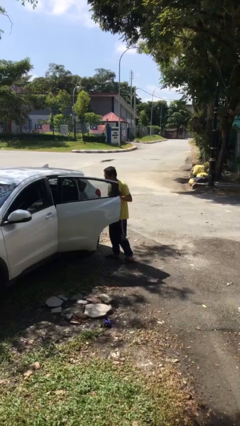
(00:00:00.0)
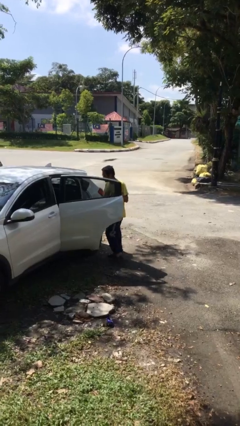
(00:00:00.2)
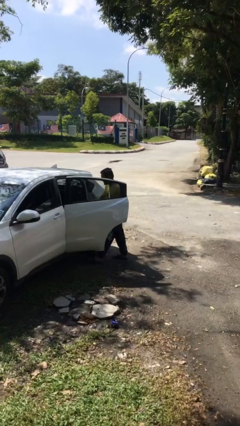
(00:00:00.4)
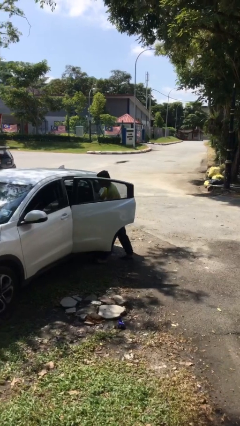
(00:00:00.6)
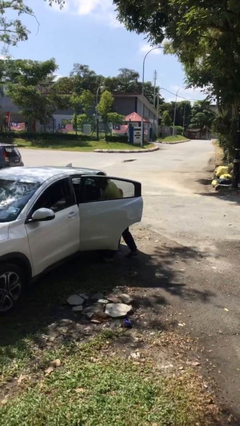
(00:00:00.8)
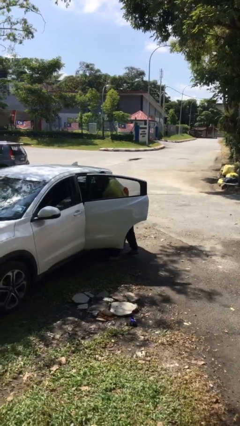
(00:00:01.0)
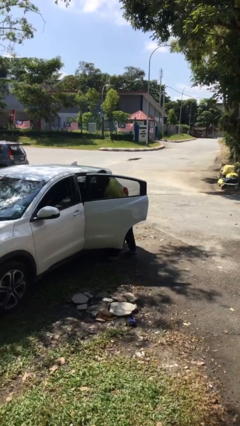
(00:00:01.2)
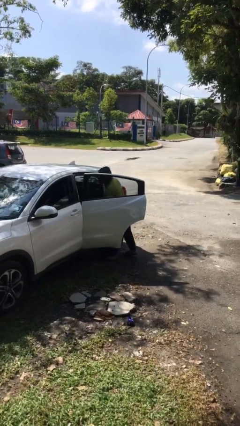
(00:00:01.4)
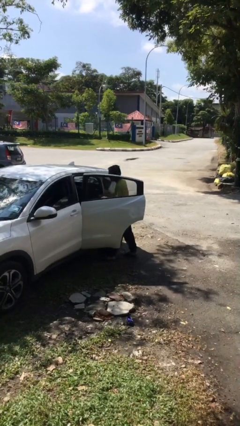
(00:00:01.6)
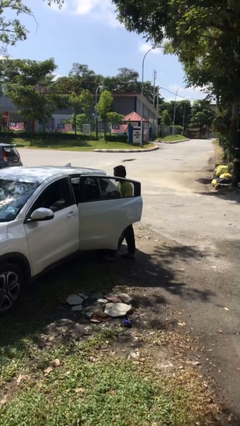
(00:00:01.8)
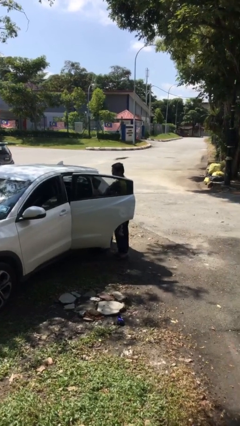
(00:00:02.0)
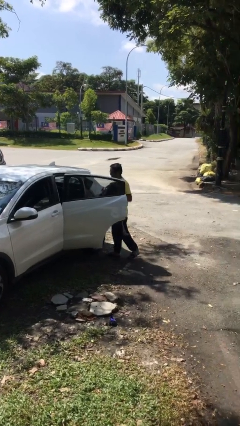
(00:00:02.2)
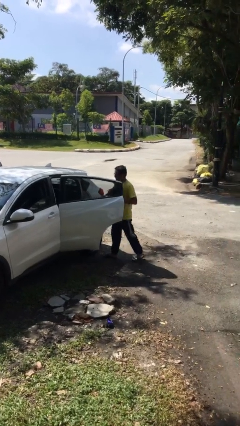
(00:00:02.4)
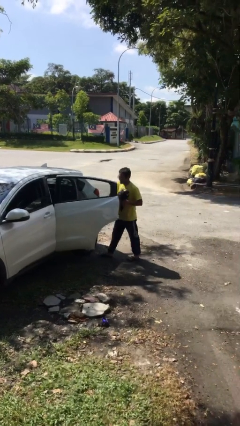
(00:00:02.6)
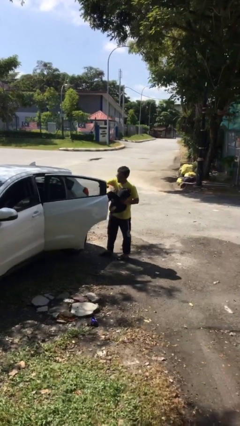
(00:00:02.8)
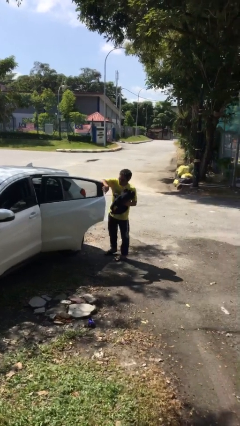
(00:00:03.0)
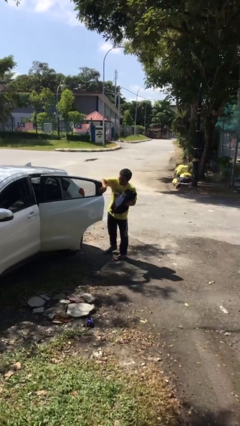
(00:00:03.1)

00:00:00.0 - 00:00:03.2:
person unloads car

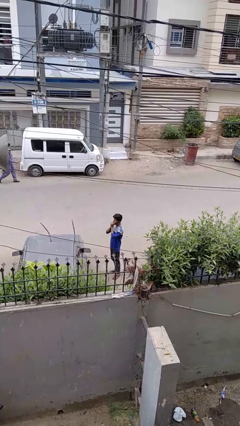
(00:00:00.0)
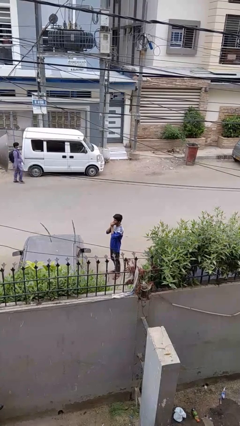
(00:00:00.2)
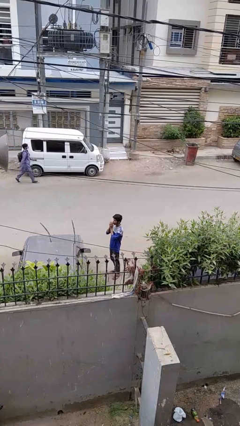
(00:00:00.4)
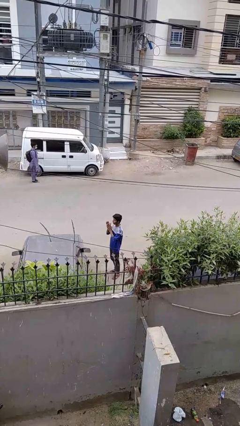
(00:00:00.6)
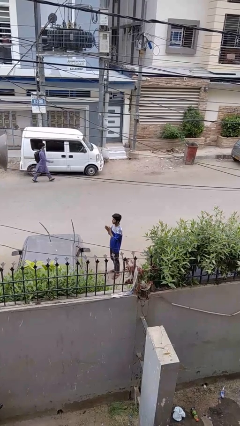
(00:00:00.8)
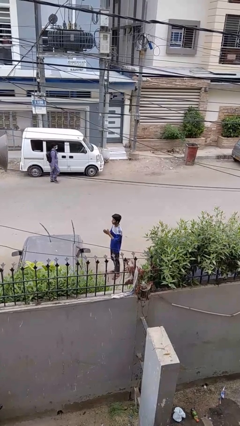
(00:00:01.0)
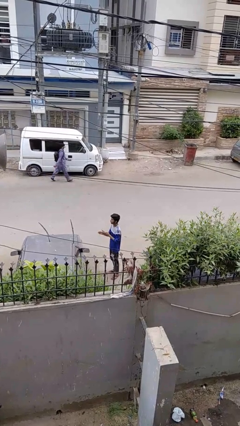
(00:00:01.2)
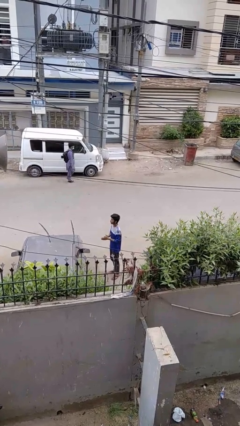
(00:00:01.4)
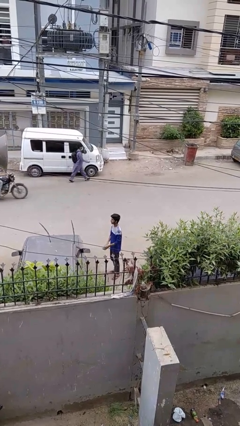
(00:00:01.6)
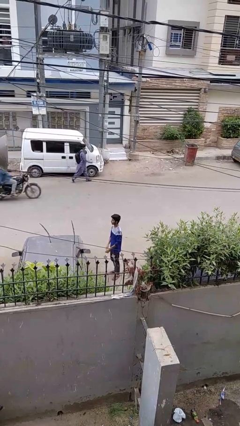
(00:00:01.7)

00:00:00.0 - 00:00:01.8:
person blows into hands

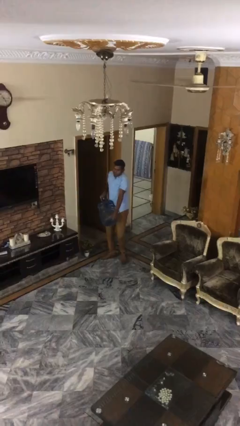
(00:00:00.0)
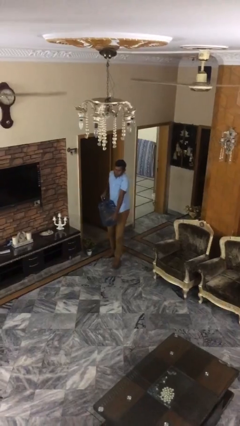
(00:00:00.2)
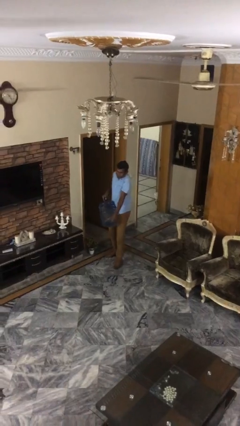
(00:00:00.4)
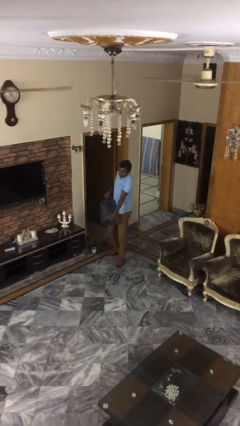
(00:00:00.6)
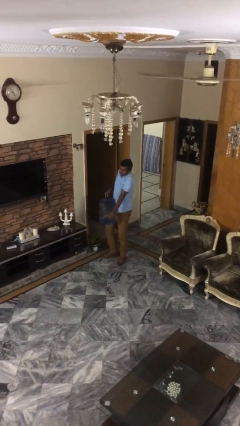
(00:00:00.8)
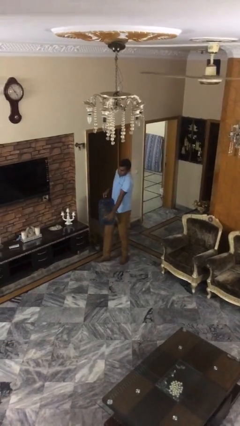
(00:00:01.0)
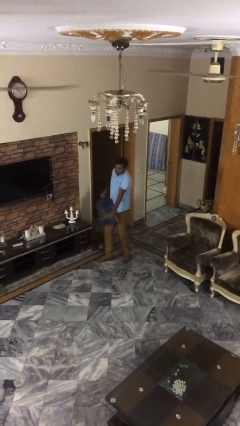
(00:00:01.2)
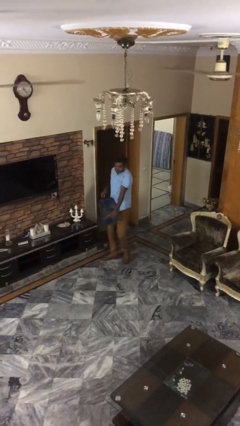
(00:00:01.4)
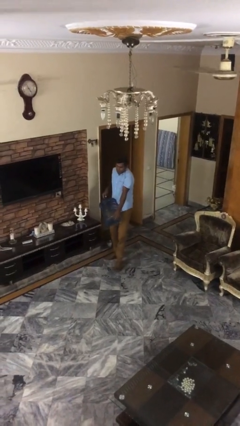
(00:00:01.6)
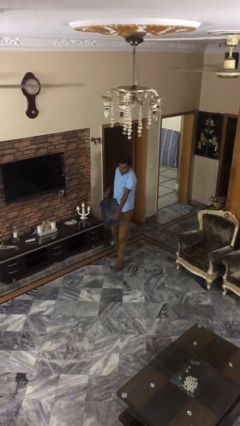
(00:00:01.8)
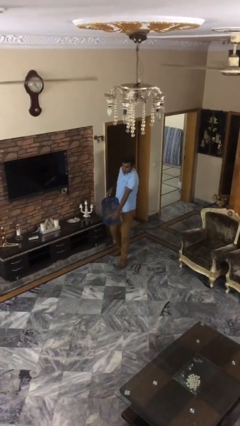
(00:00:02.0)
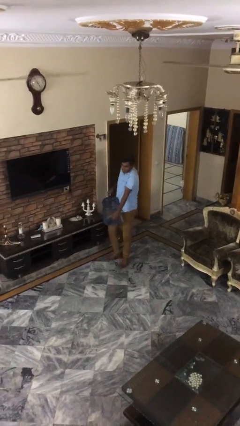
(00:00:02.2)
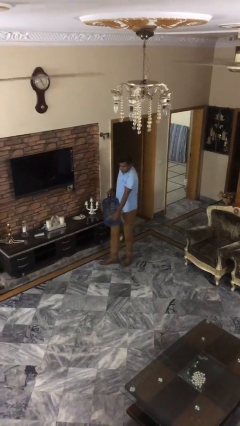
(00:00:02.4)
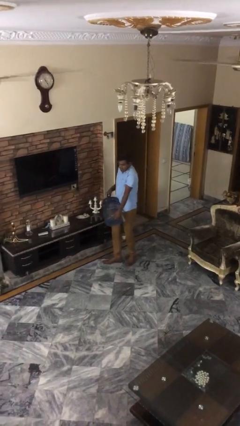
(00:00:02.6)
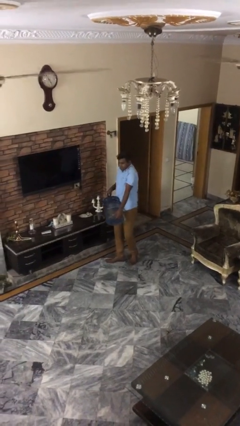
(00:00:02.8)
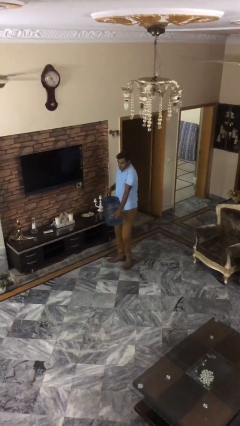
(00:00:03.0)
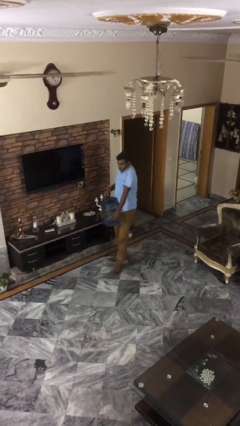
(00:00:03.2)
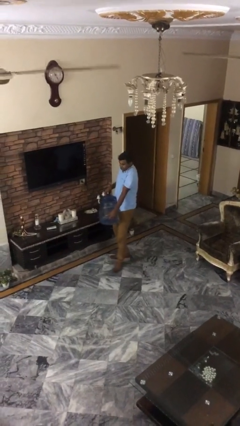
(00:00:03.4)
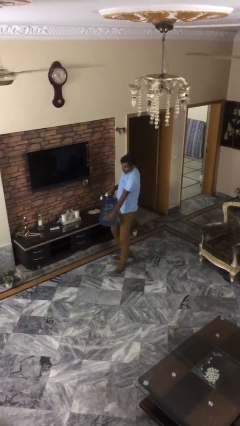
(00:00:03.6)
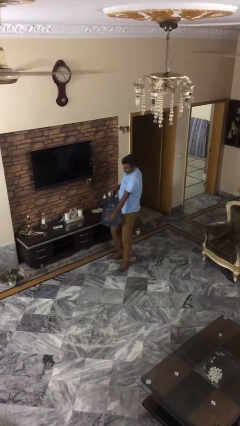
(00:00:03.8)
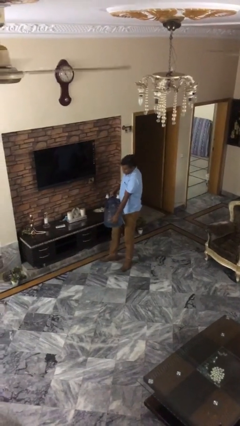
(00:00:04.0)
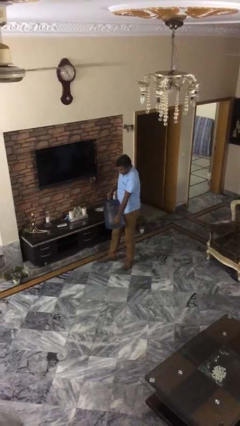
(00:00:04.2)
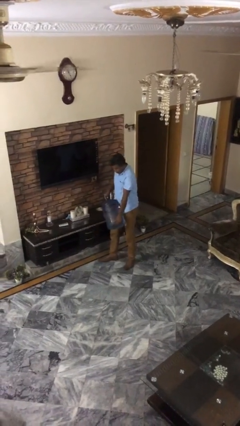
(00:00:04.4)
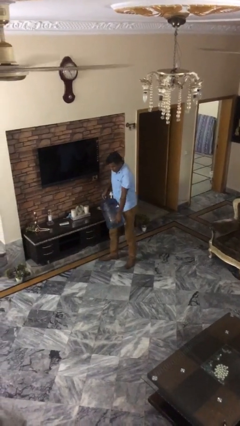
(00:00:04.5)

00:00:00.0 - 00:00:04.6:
person carries heavy object

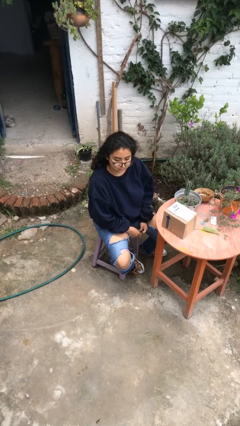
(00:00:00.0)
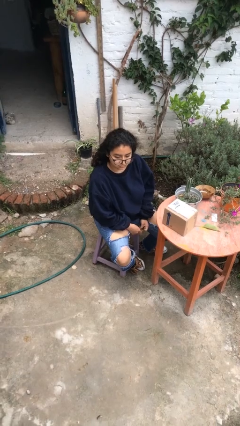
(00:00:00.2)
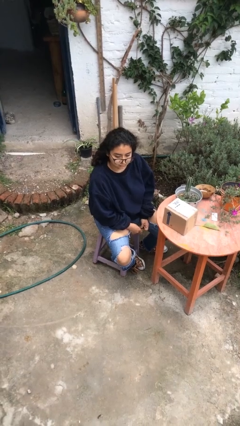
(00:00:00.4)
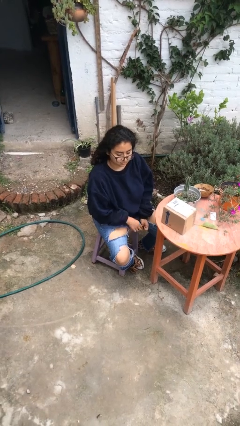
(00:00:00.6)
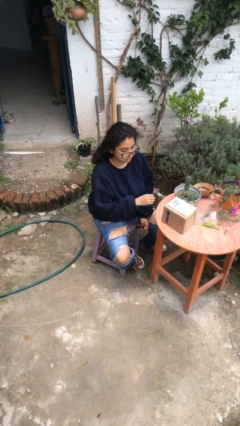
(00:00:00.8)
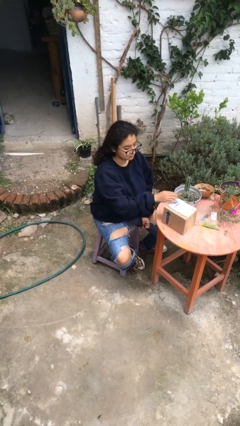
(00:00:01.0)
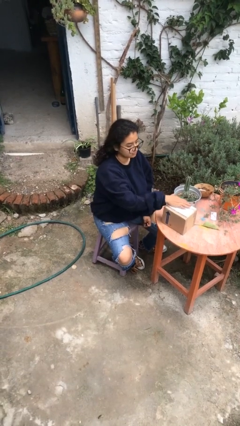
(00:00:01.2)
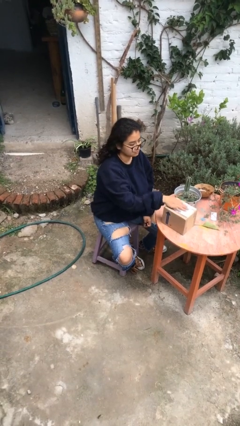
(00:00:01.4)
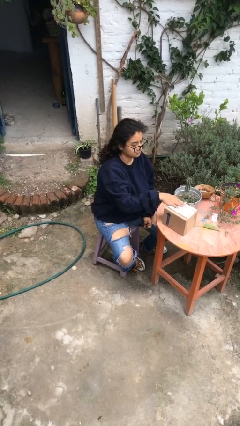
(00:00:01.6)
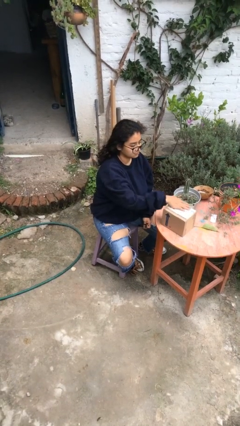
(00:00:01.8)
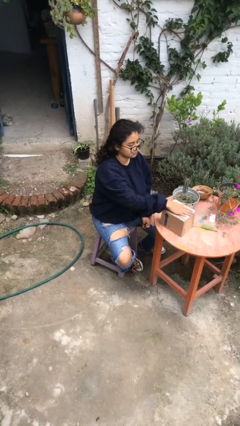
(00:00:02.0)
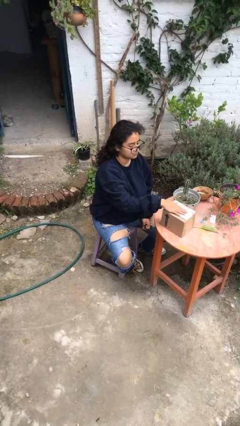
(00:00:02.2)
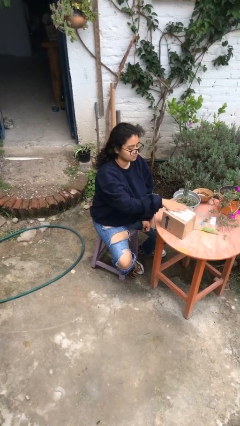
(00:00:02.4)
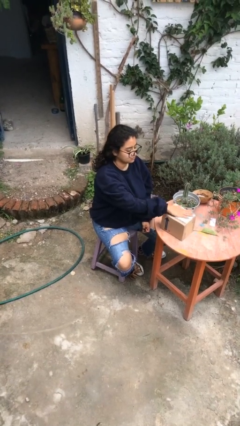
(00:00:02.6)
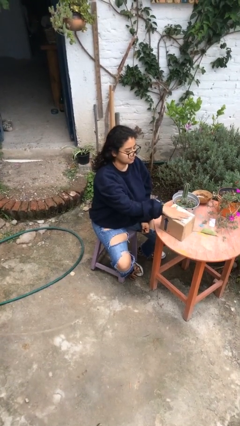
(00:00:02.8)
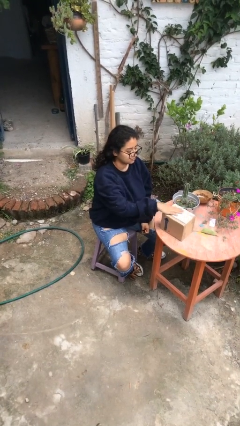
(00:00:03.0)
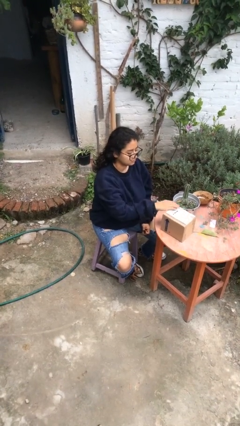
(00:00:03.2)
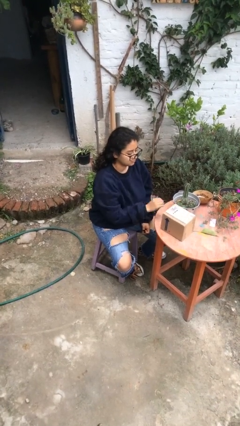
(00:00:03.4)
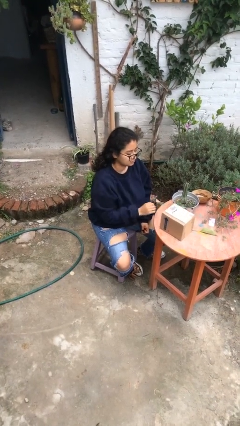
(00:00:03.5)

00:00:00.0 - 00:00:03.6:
person waves hand over object

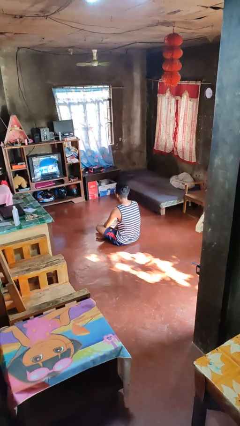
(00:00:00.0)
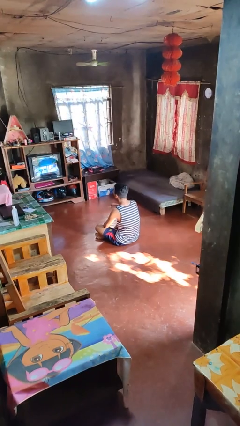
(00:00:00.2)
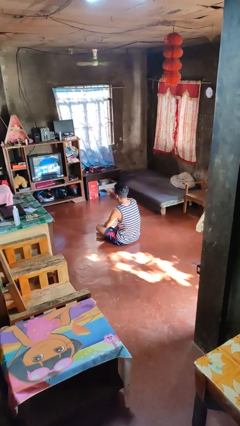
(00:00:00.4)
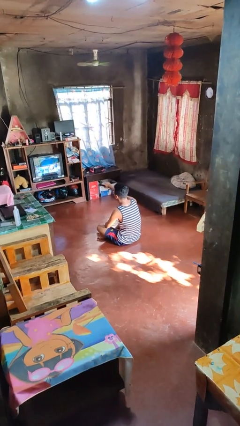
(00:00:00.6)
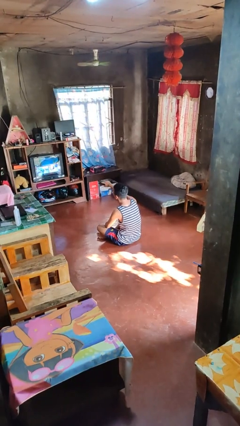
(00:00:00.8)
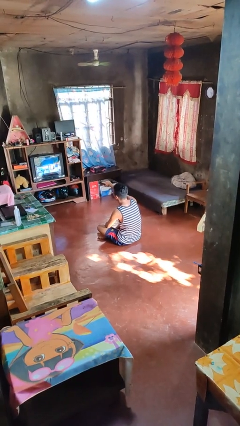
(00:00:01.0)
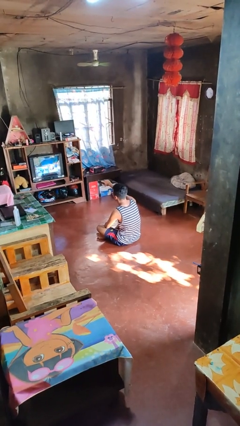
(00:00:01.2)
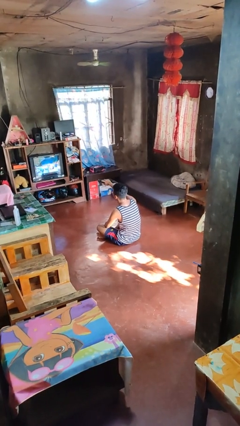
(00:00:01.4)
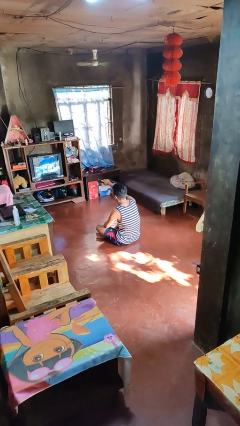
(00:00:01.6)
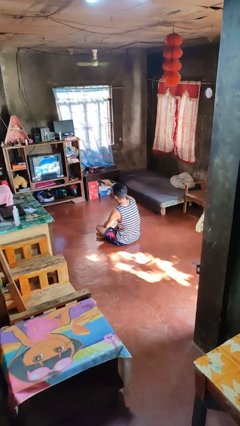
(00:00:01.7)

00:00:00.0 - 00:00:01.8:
person uses television remote

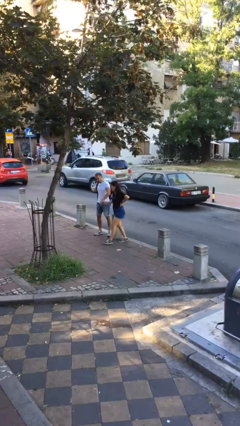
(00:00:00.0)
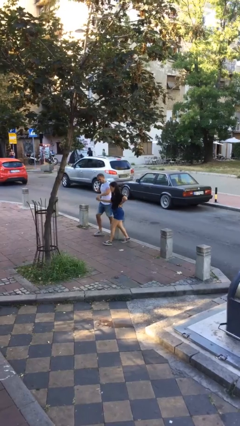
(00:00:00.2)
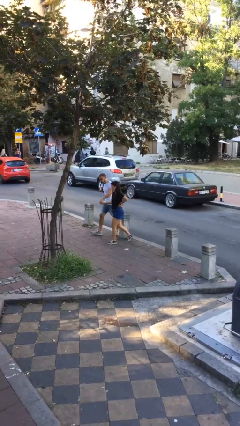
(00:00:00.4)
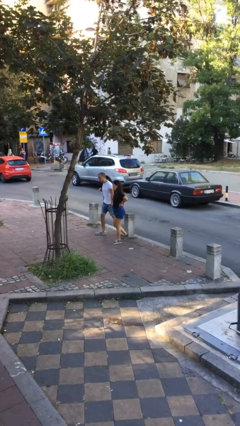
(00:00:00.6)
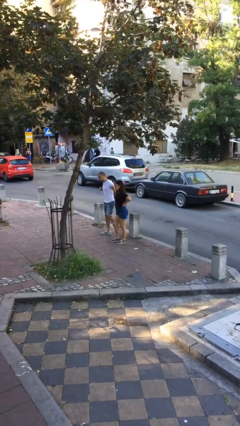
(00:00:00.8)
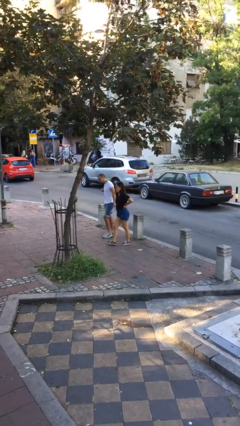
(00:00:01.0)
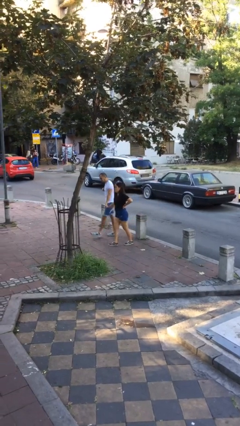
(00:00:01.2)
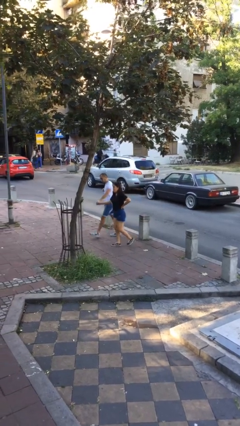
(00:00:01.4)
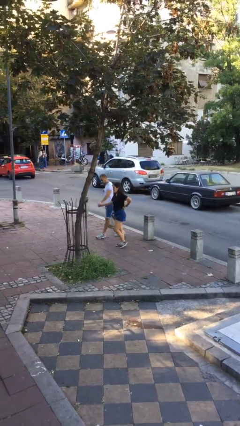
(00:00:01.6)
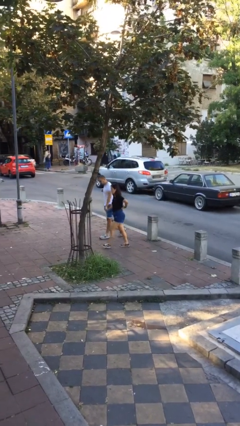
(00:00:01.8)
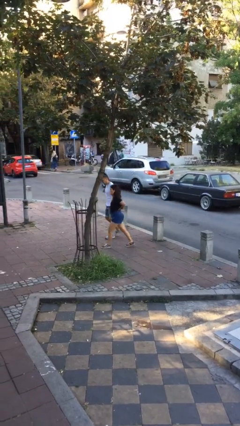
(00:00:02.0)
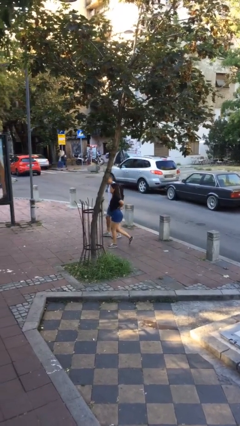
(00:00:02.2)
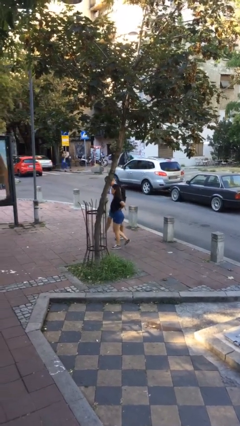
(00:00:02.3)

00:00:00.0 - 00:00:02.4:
person holds hand
